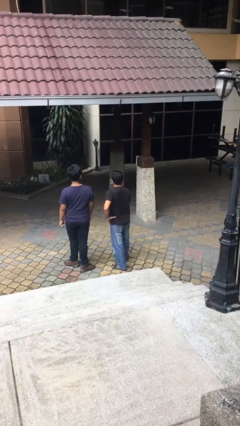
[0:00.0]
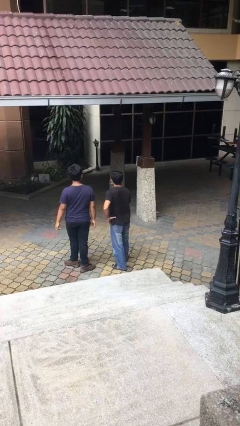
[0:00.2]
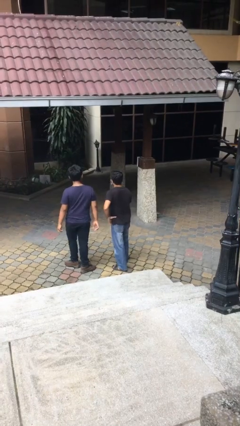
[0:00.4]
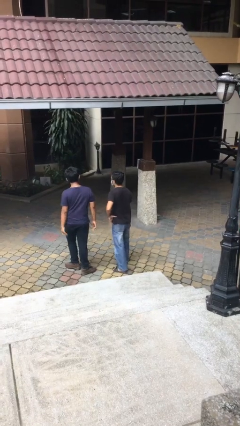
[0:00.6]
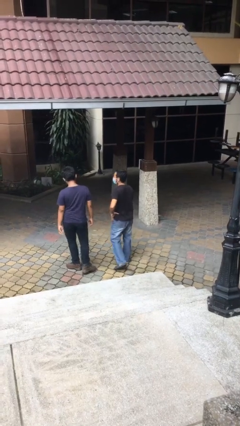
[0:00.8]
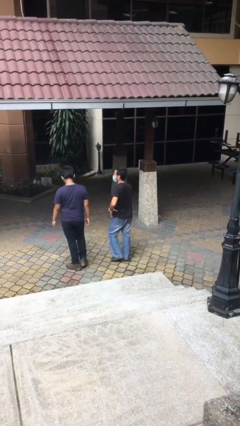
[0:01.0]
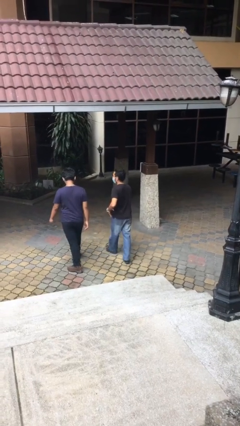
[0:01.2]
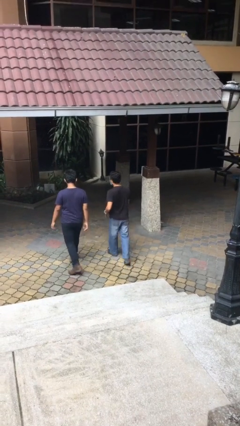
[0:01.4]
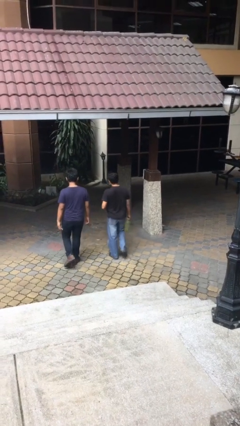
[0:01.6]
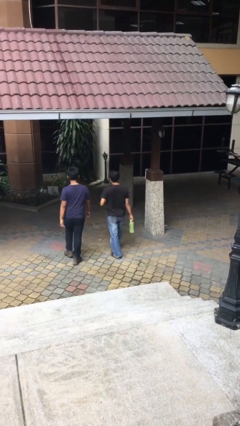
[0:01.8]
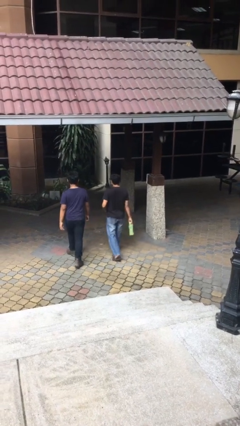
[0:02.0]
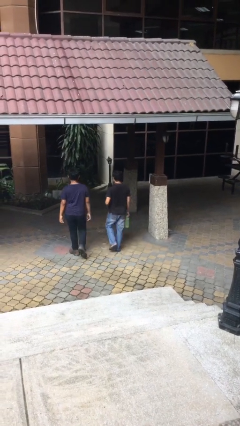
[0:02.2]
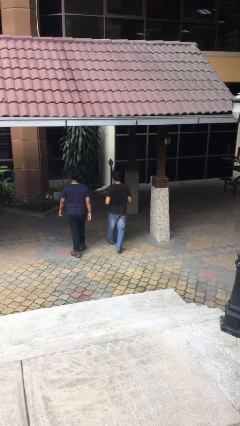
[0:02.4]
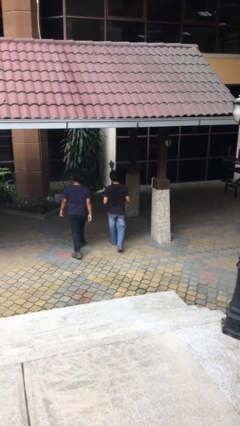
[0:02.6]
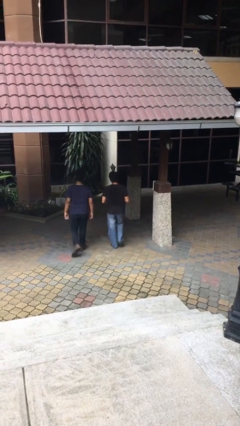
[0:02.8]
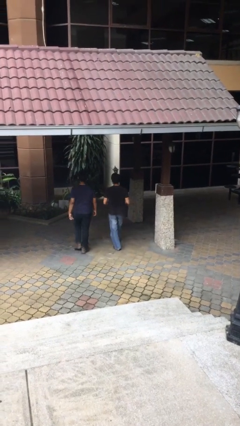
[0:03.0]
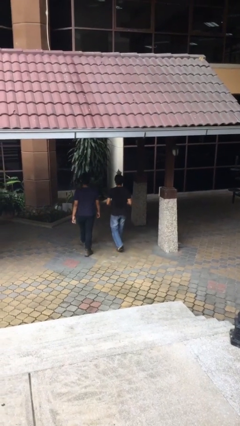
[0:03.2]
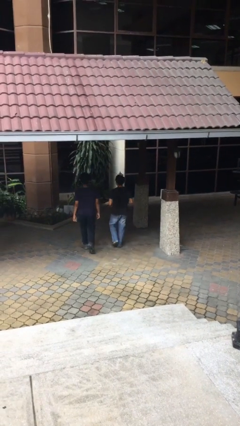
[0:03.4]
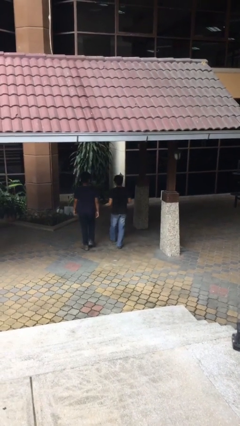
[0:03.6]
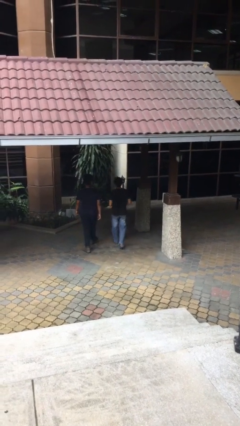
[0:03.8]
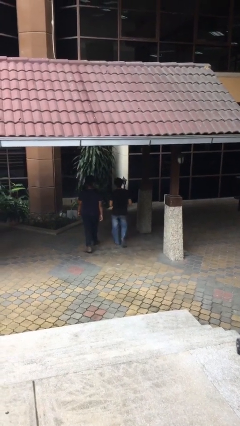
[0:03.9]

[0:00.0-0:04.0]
person talks to person

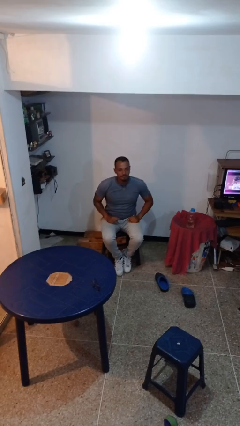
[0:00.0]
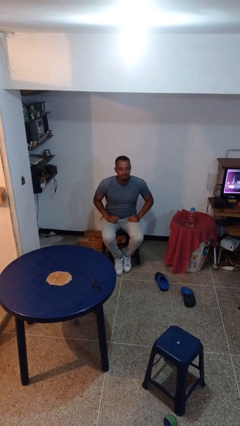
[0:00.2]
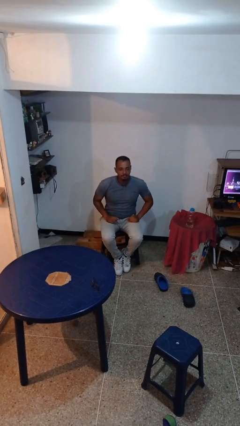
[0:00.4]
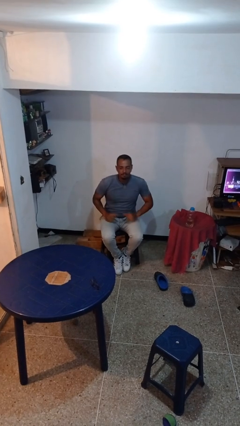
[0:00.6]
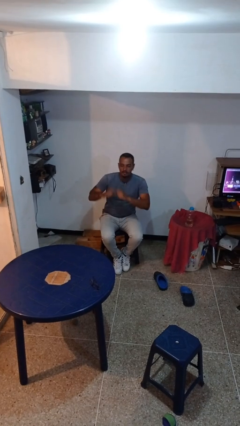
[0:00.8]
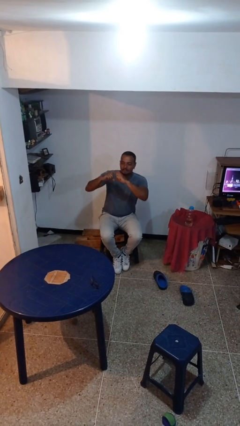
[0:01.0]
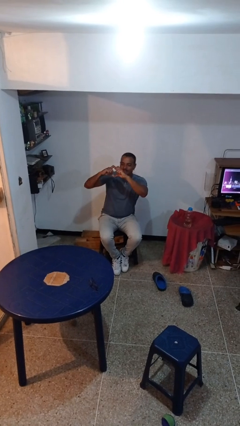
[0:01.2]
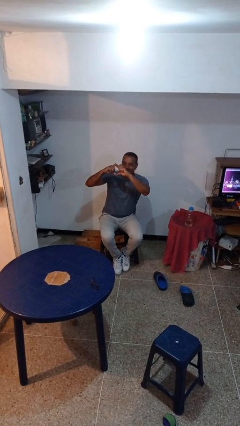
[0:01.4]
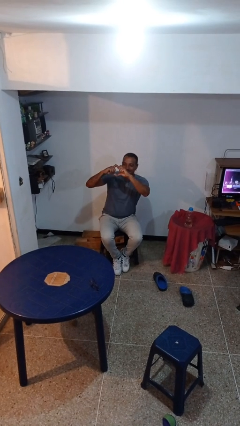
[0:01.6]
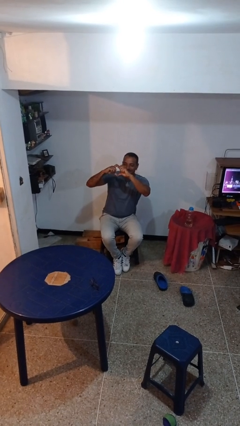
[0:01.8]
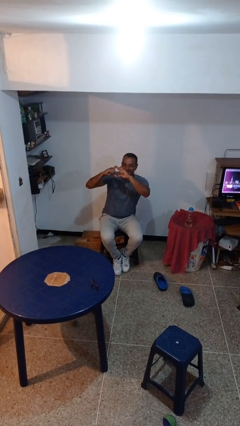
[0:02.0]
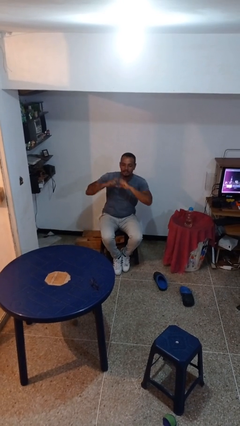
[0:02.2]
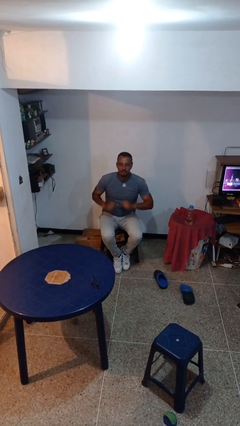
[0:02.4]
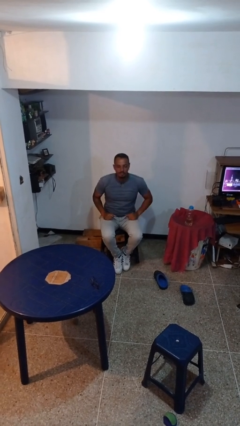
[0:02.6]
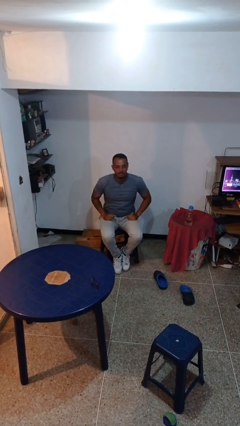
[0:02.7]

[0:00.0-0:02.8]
person gestures heart

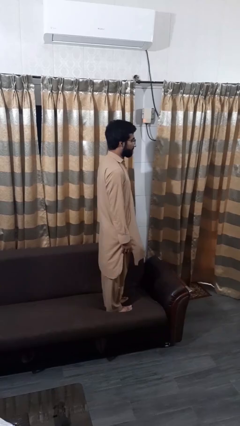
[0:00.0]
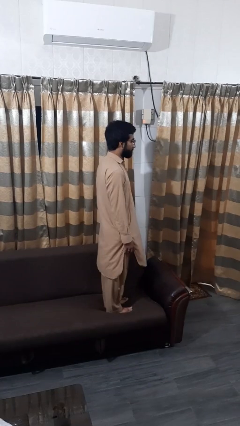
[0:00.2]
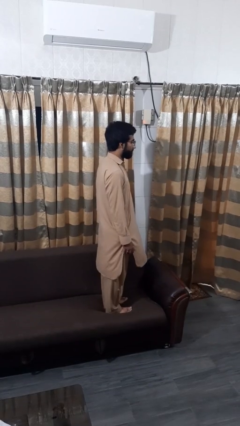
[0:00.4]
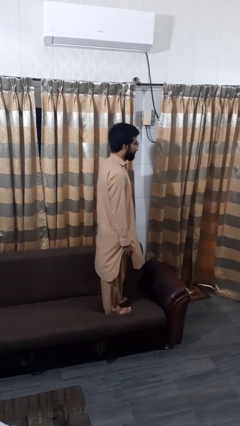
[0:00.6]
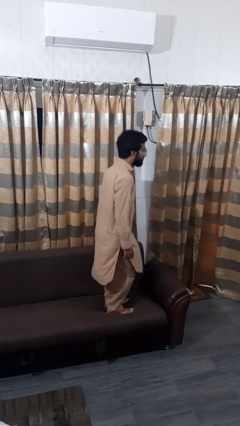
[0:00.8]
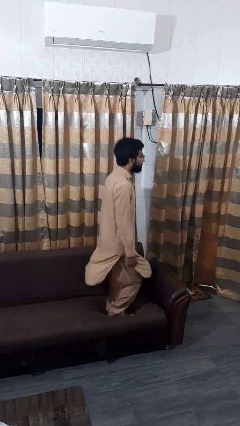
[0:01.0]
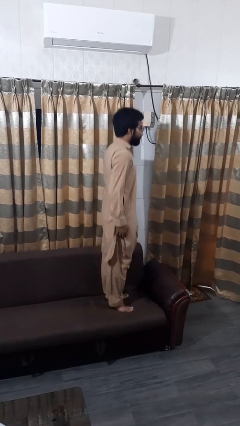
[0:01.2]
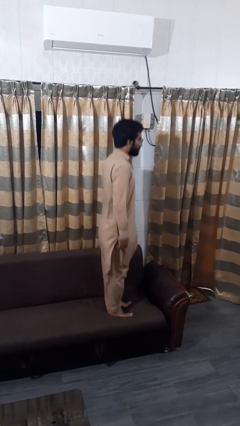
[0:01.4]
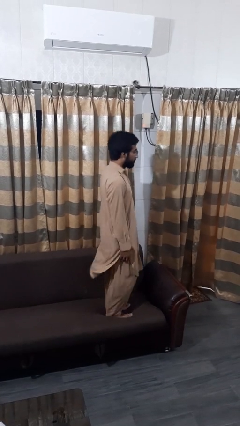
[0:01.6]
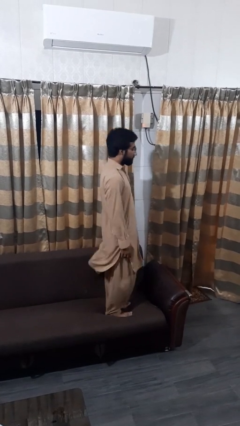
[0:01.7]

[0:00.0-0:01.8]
person jumps on couch

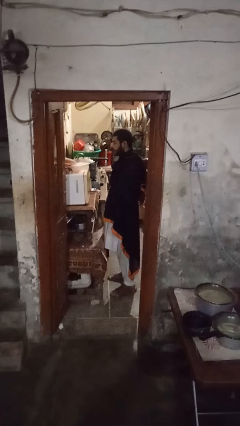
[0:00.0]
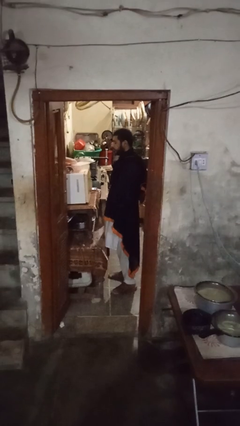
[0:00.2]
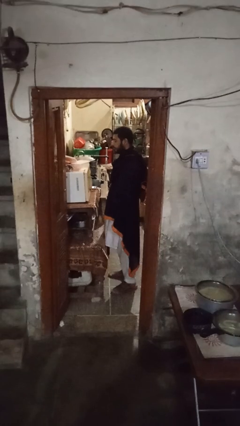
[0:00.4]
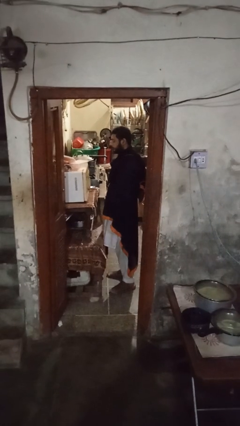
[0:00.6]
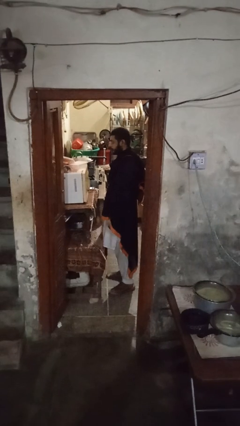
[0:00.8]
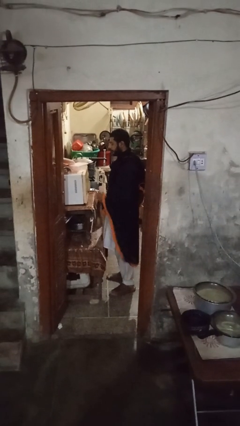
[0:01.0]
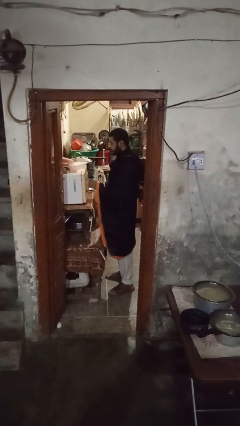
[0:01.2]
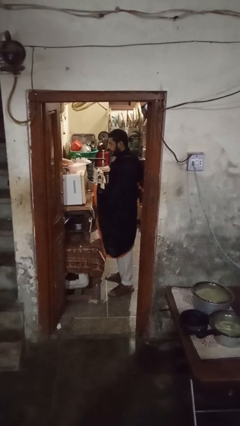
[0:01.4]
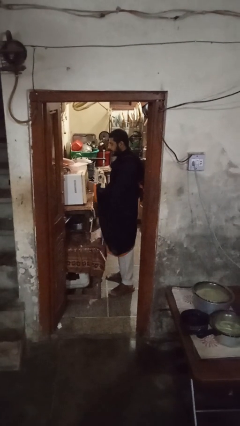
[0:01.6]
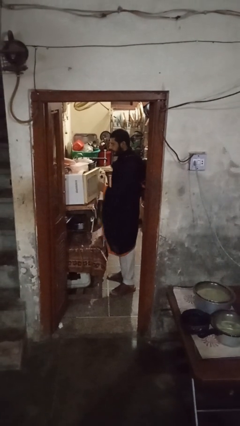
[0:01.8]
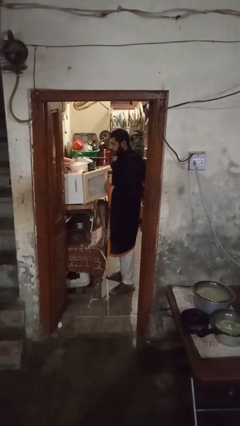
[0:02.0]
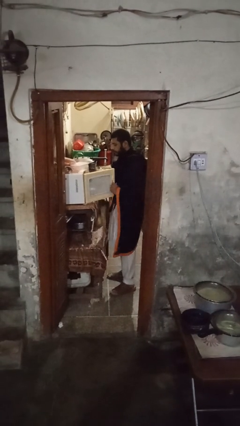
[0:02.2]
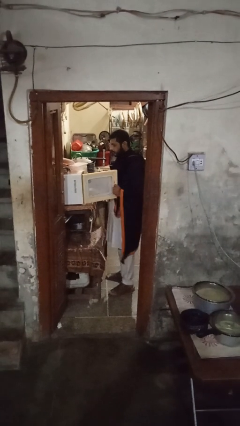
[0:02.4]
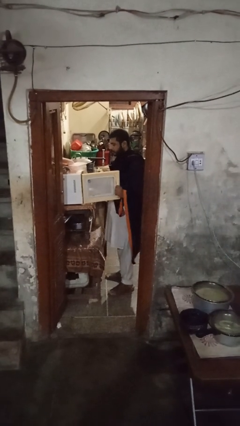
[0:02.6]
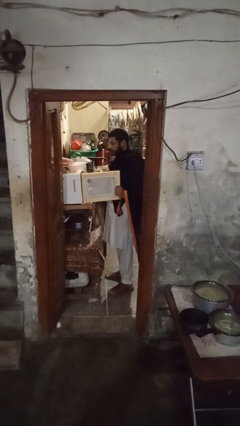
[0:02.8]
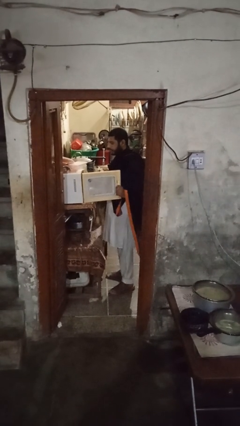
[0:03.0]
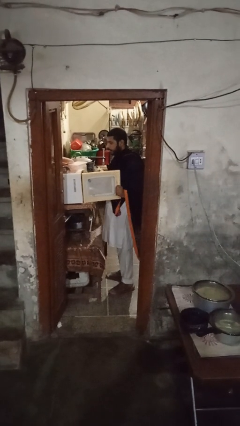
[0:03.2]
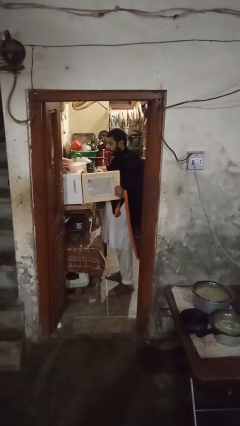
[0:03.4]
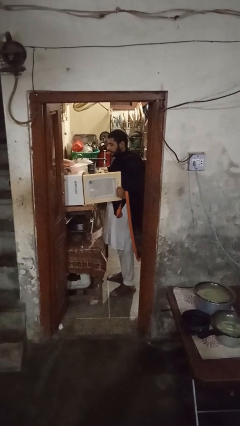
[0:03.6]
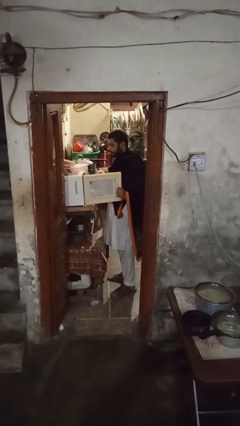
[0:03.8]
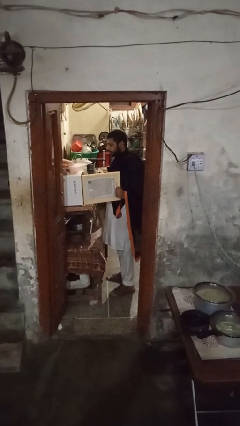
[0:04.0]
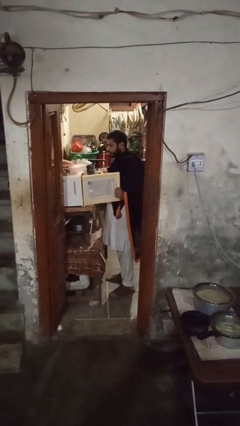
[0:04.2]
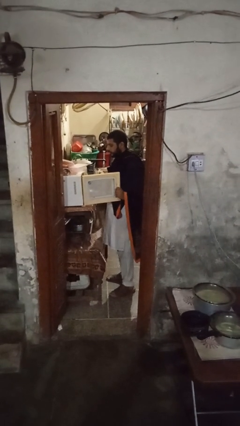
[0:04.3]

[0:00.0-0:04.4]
person opens microwave

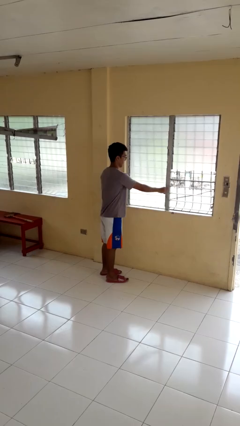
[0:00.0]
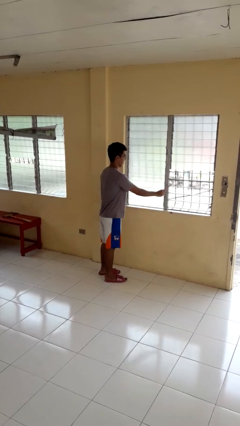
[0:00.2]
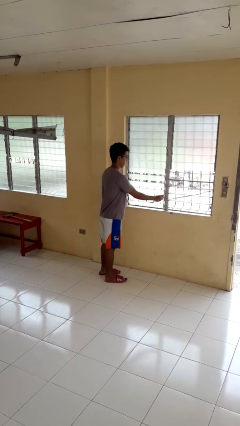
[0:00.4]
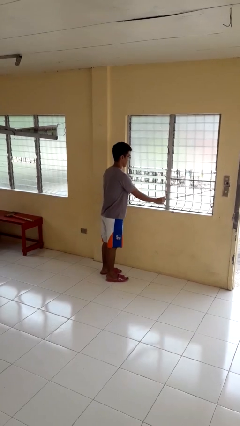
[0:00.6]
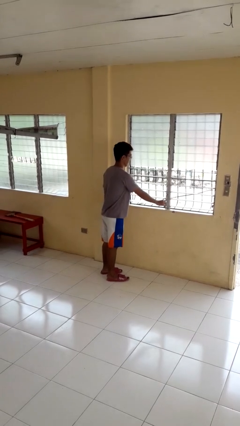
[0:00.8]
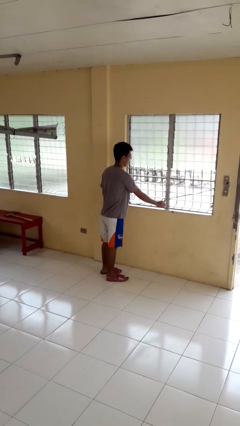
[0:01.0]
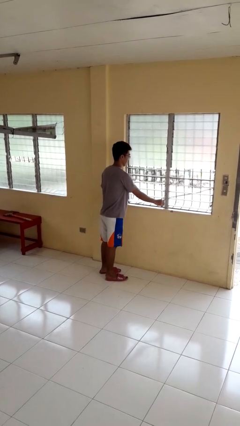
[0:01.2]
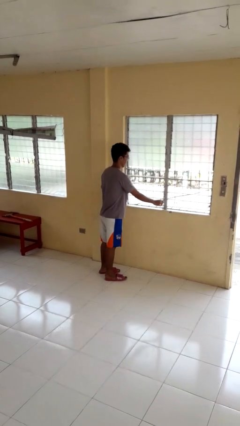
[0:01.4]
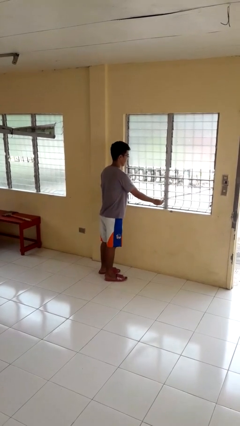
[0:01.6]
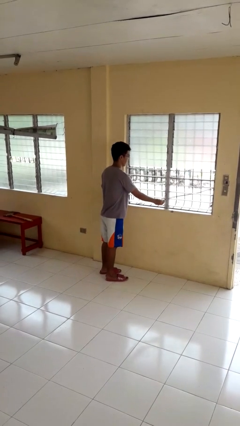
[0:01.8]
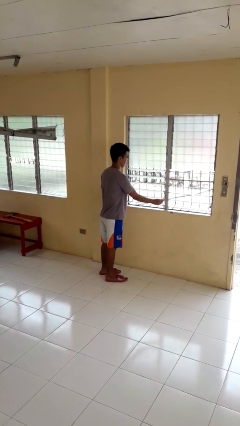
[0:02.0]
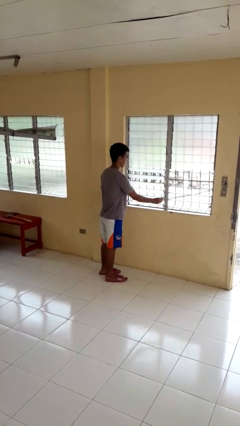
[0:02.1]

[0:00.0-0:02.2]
person opens home window

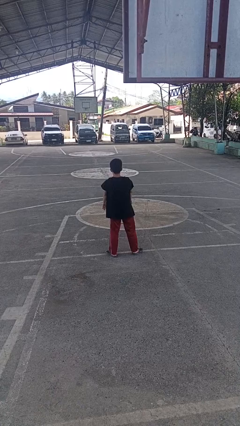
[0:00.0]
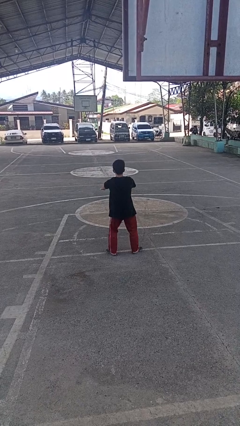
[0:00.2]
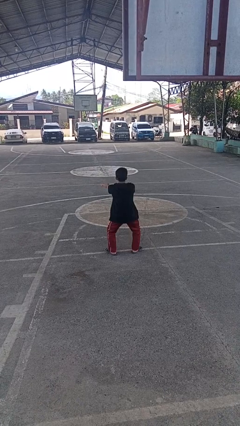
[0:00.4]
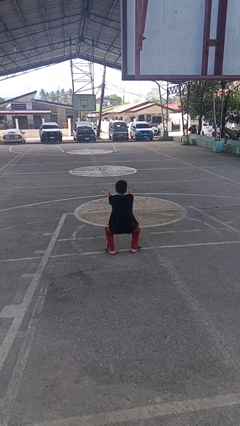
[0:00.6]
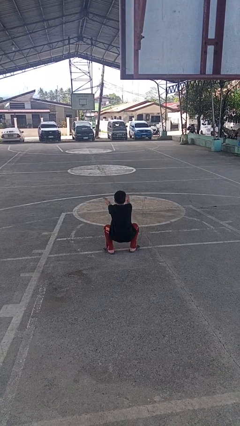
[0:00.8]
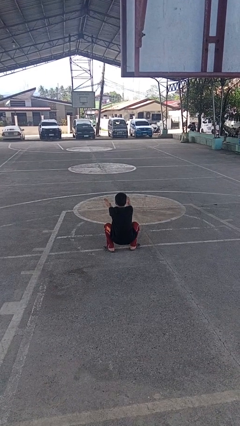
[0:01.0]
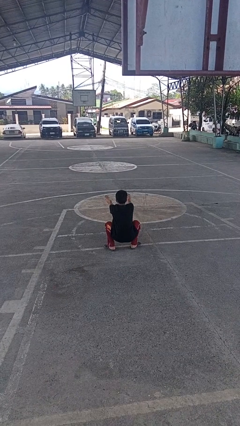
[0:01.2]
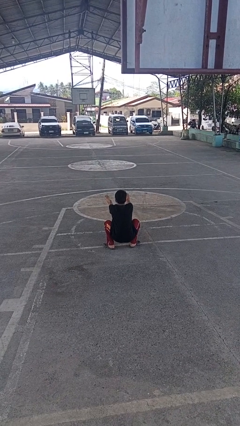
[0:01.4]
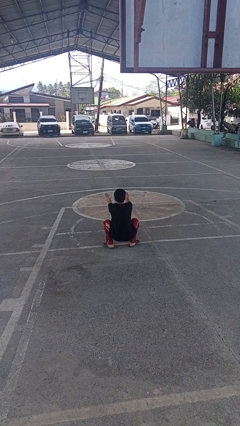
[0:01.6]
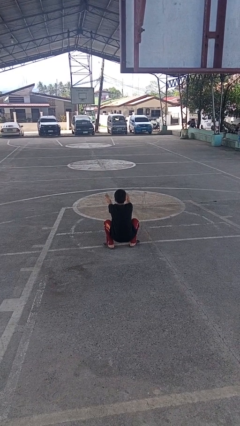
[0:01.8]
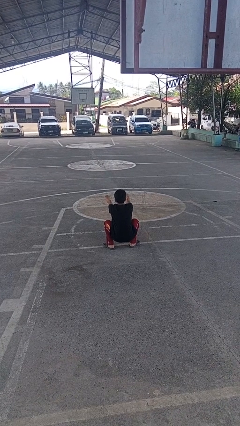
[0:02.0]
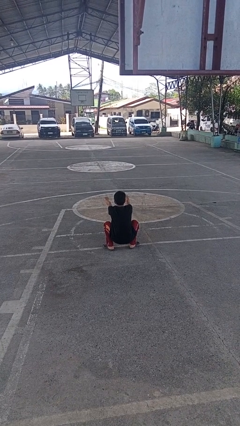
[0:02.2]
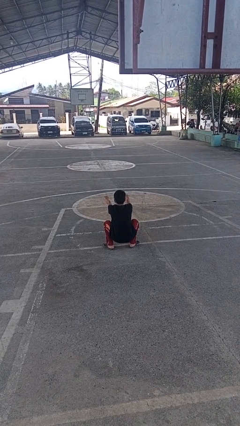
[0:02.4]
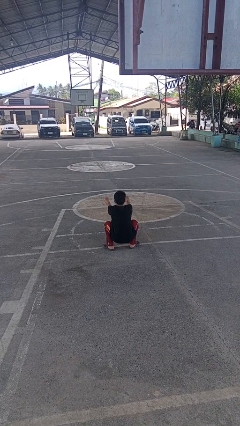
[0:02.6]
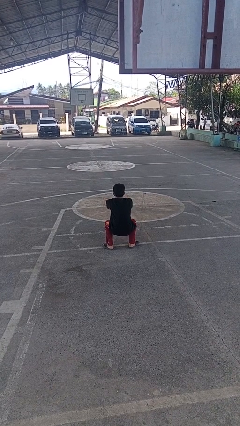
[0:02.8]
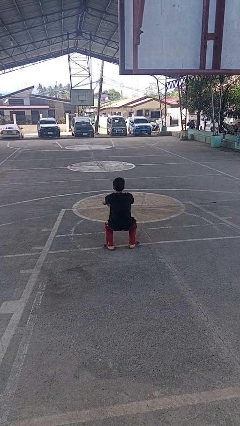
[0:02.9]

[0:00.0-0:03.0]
person squats
